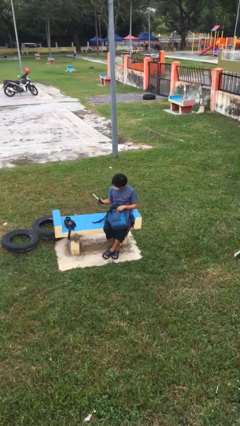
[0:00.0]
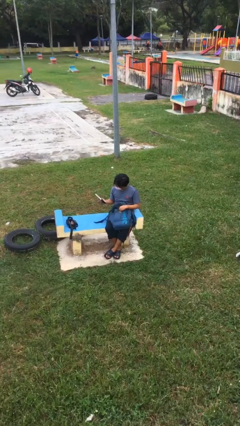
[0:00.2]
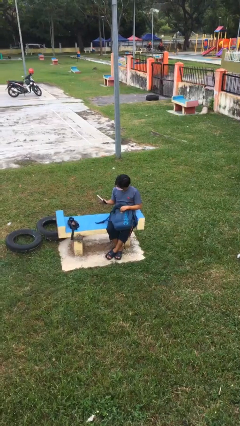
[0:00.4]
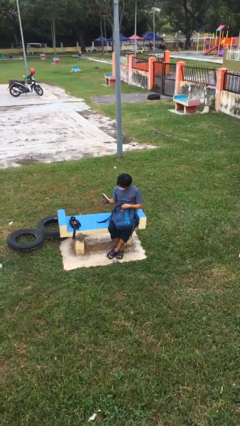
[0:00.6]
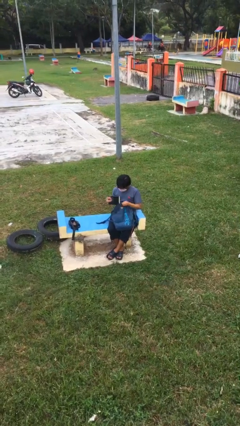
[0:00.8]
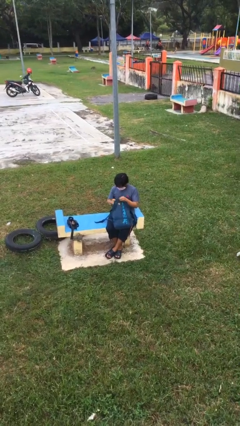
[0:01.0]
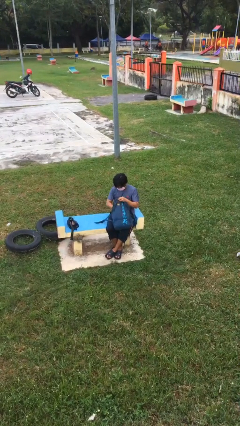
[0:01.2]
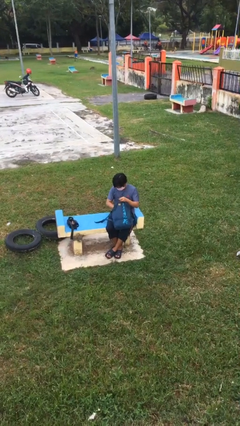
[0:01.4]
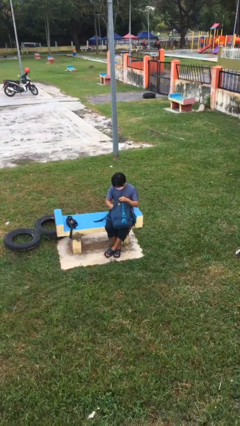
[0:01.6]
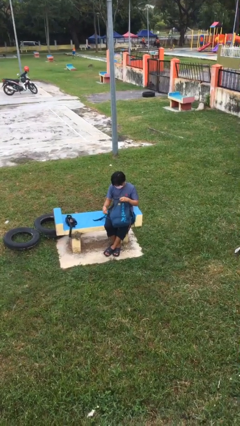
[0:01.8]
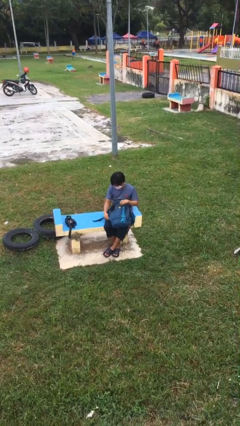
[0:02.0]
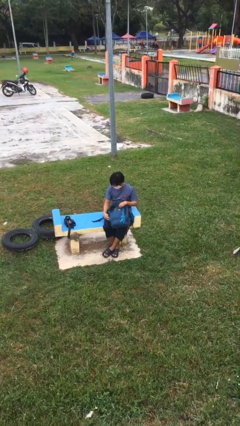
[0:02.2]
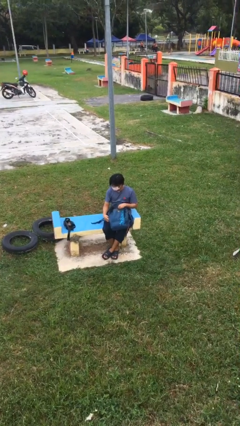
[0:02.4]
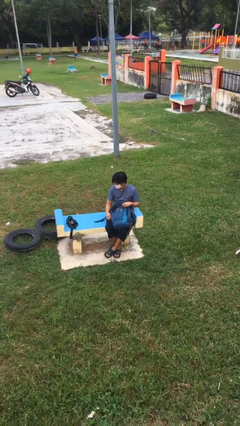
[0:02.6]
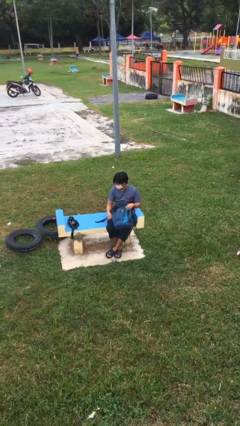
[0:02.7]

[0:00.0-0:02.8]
person puts object into backpack

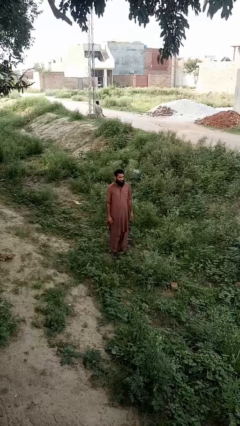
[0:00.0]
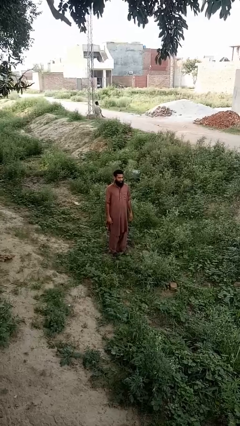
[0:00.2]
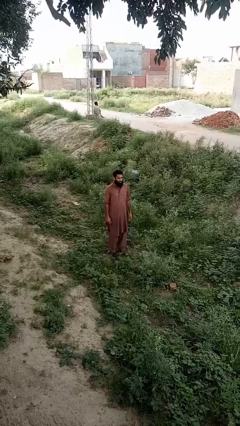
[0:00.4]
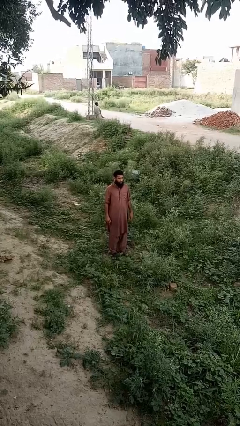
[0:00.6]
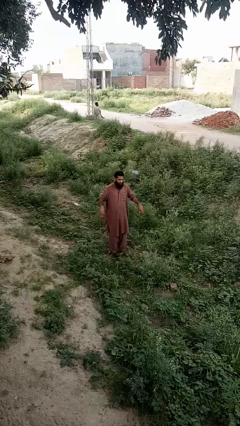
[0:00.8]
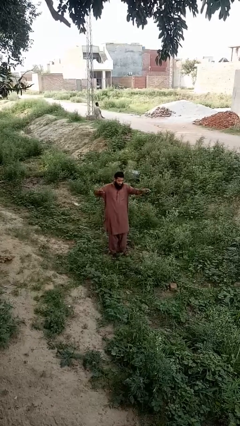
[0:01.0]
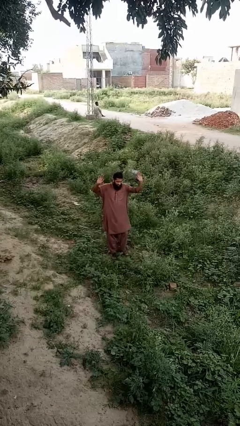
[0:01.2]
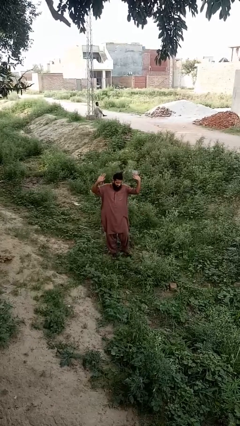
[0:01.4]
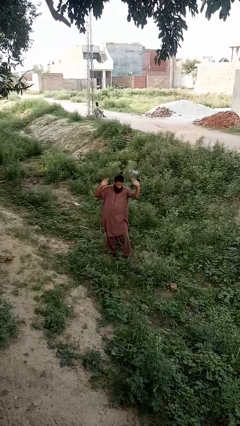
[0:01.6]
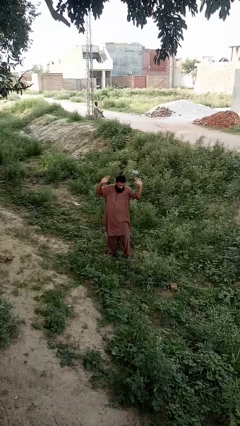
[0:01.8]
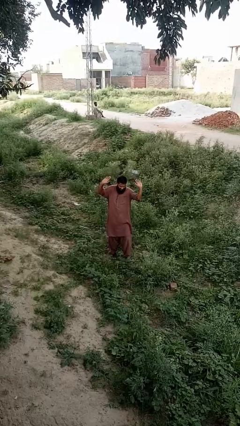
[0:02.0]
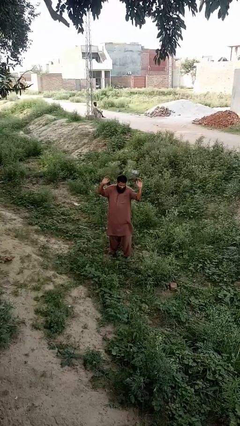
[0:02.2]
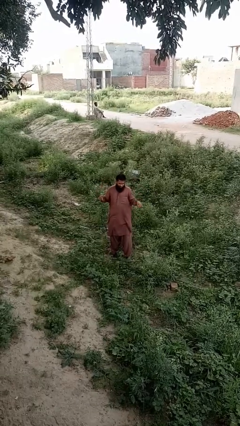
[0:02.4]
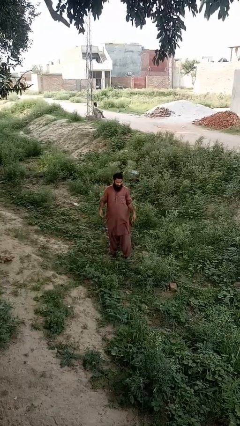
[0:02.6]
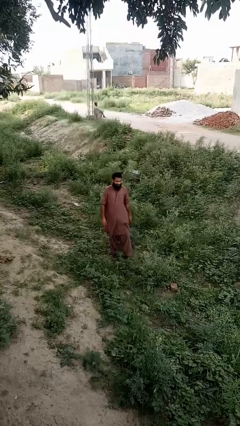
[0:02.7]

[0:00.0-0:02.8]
person dances in place

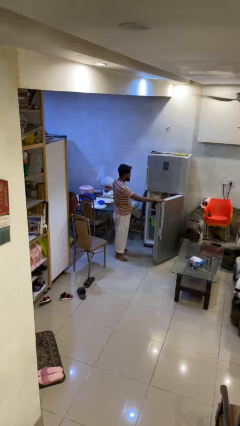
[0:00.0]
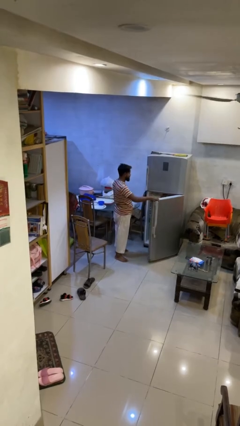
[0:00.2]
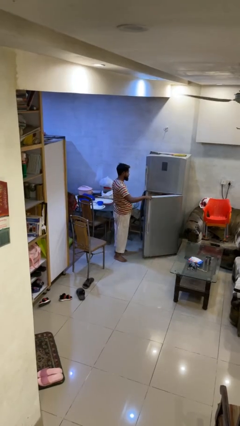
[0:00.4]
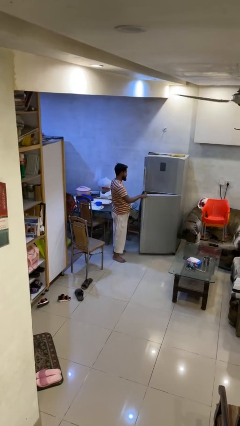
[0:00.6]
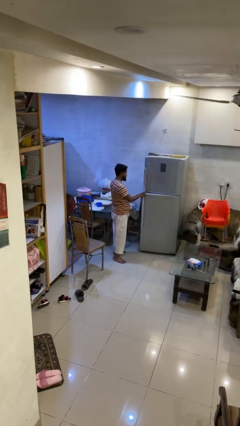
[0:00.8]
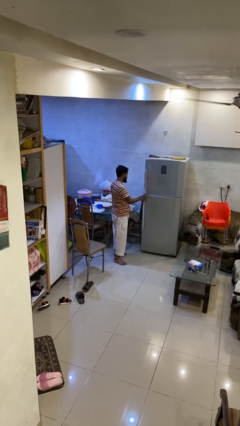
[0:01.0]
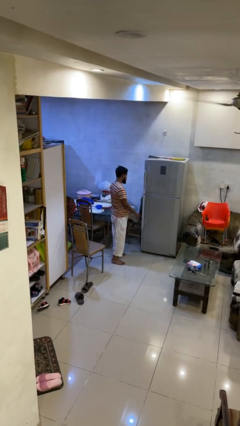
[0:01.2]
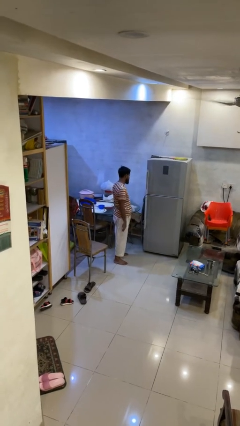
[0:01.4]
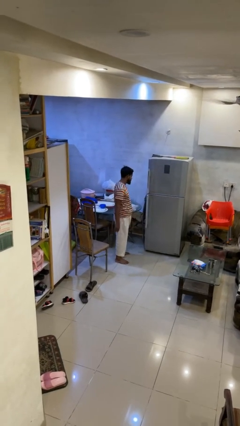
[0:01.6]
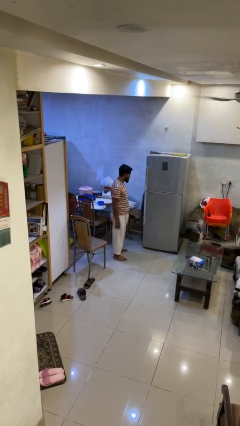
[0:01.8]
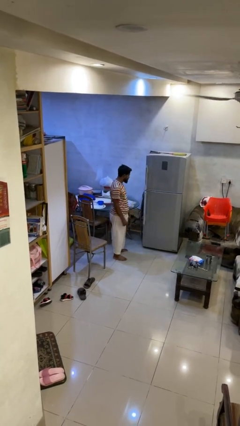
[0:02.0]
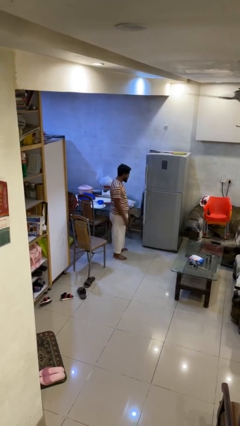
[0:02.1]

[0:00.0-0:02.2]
person closes refrigerator

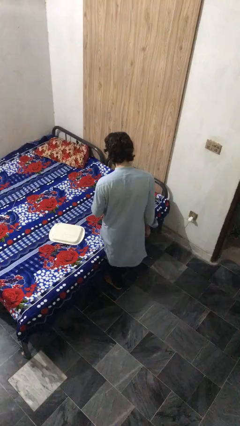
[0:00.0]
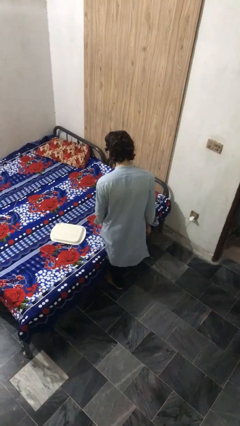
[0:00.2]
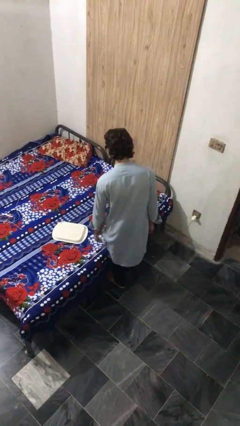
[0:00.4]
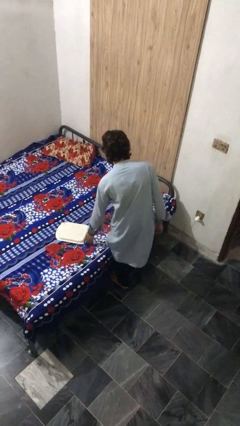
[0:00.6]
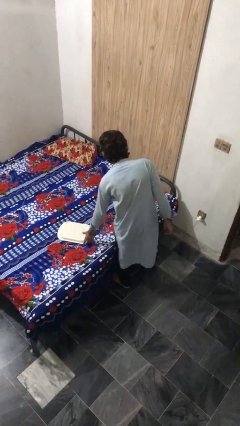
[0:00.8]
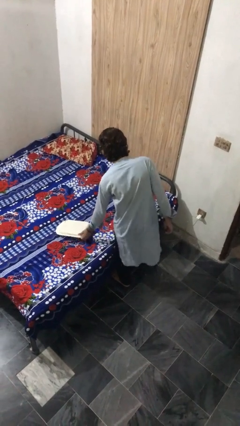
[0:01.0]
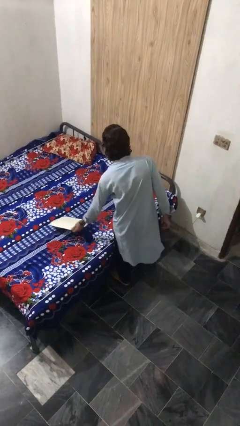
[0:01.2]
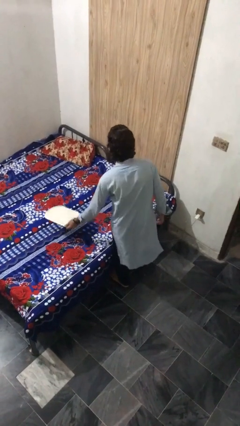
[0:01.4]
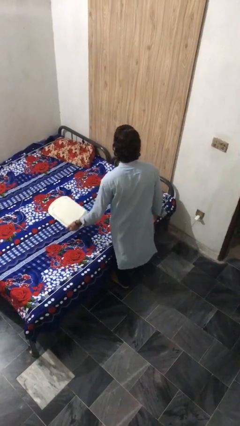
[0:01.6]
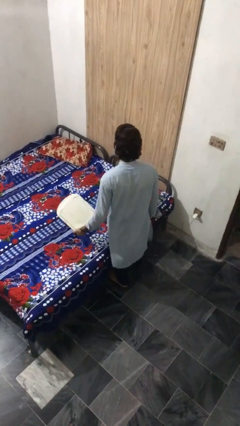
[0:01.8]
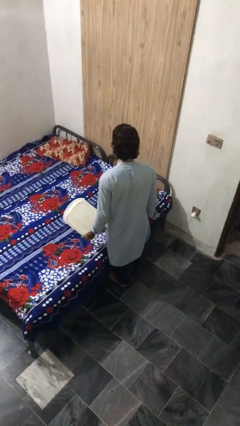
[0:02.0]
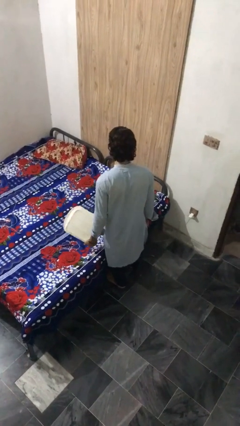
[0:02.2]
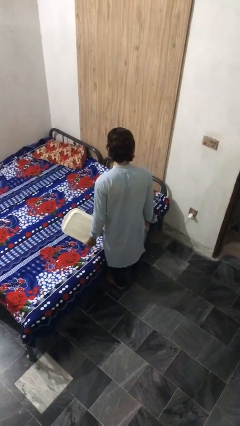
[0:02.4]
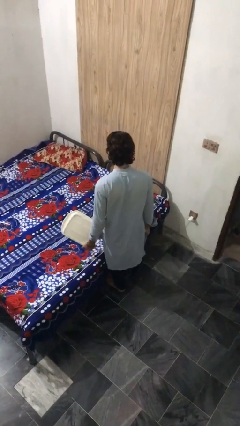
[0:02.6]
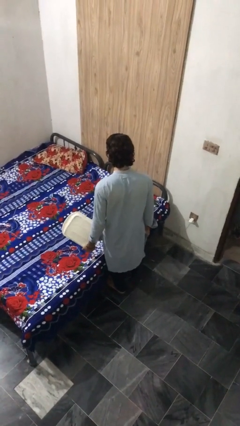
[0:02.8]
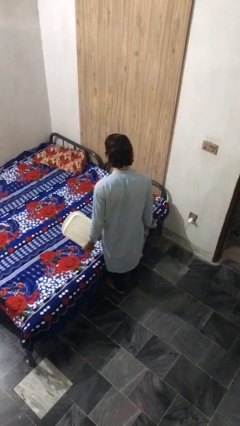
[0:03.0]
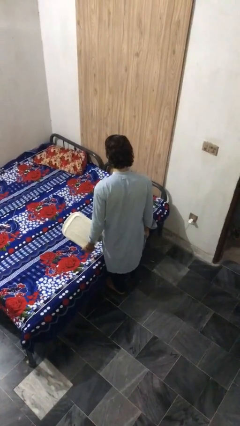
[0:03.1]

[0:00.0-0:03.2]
person picks up object from bed

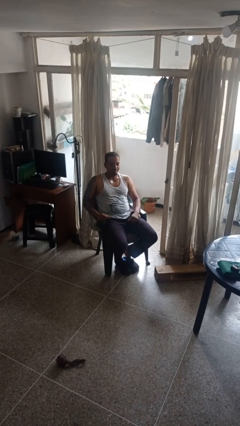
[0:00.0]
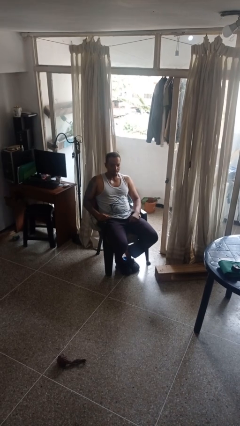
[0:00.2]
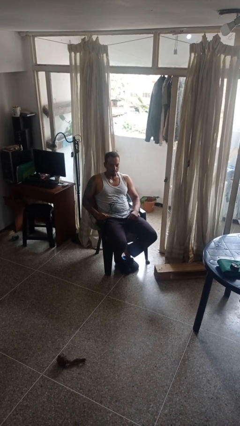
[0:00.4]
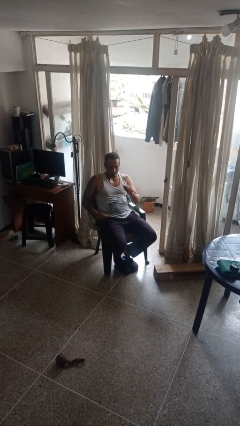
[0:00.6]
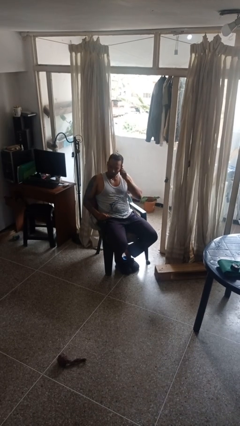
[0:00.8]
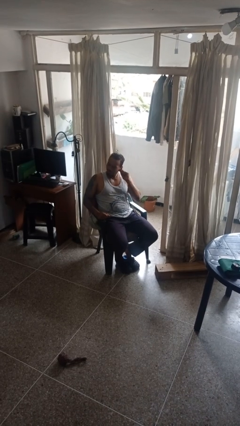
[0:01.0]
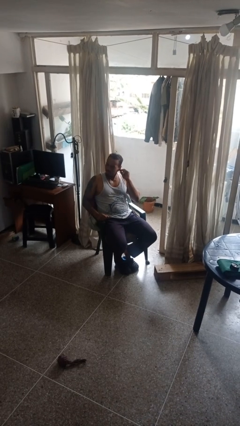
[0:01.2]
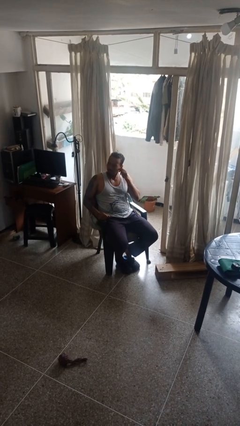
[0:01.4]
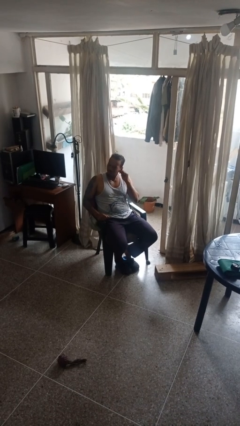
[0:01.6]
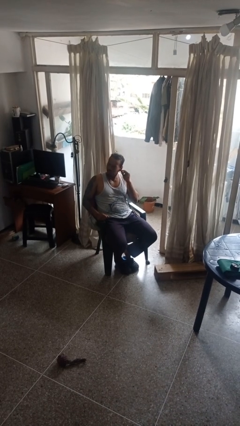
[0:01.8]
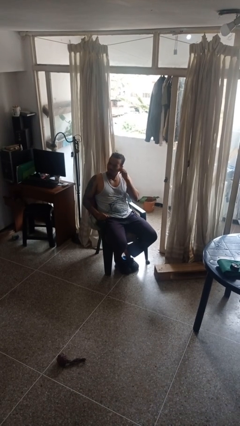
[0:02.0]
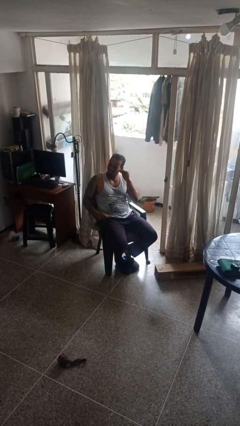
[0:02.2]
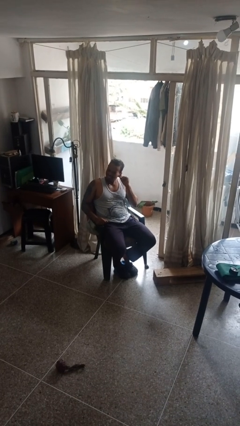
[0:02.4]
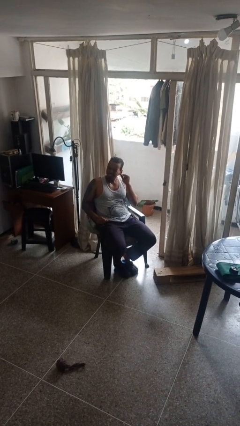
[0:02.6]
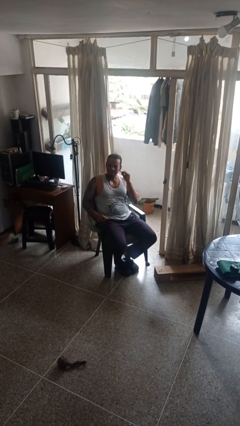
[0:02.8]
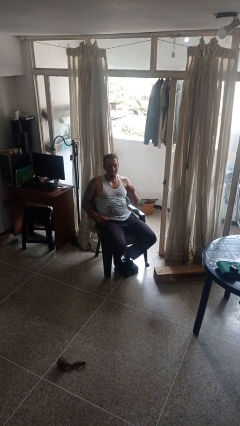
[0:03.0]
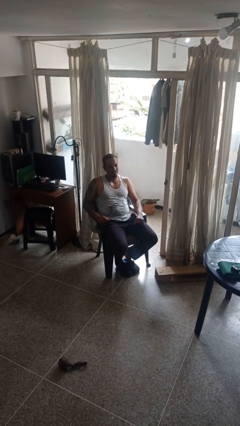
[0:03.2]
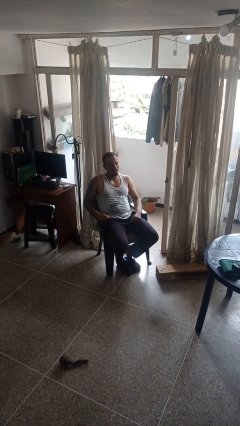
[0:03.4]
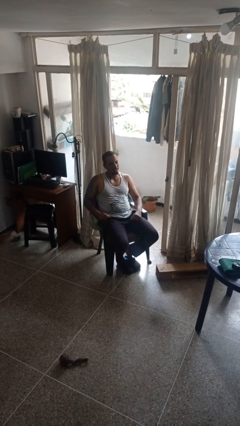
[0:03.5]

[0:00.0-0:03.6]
person touches earlobe

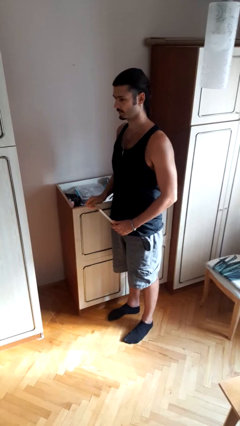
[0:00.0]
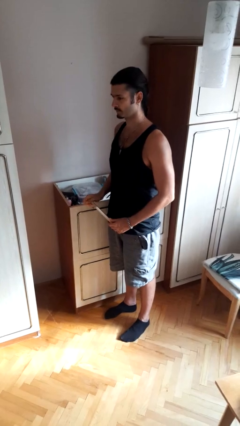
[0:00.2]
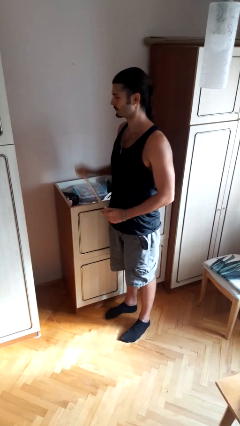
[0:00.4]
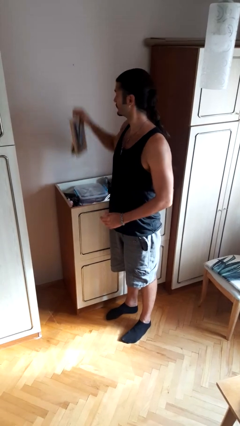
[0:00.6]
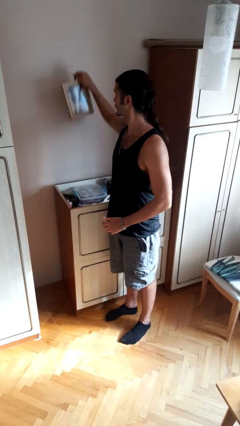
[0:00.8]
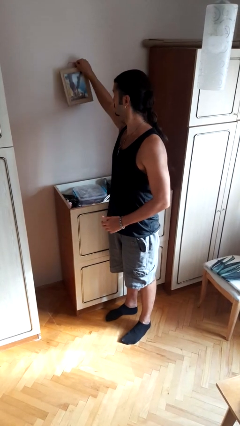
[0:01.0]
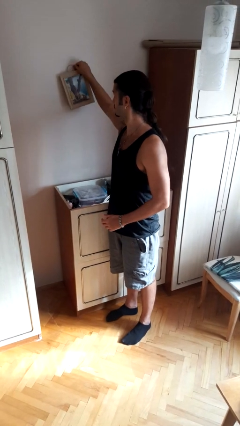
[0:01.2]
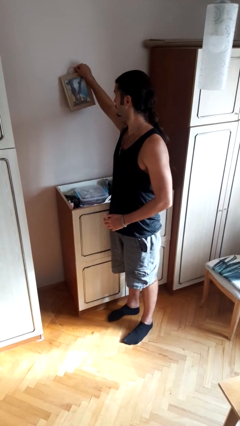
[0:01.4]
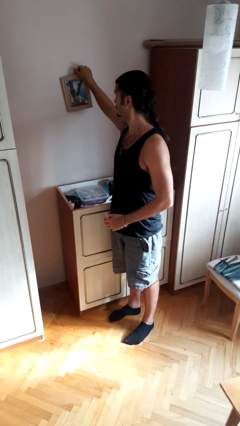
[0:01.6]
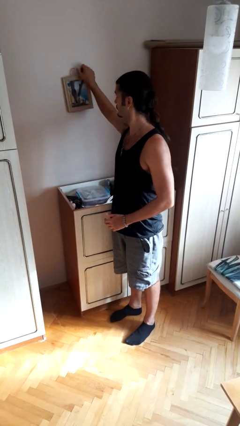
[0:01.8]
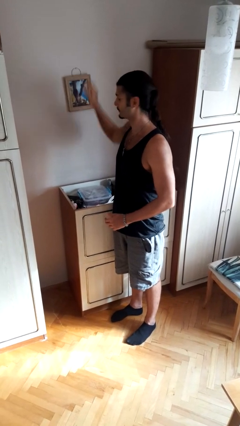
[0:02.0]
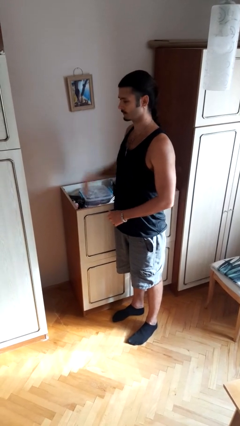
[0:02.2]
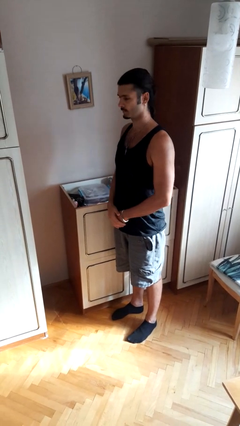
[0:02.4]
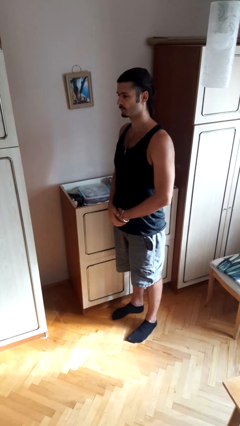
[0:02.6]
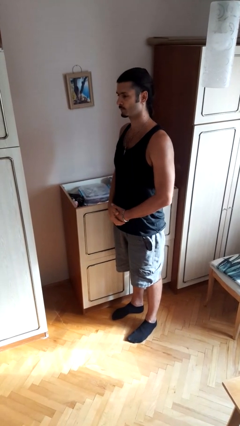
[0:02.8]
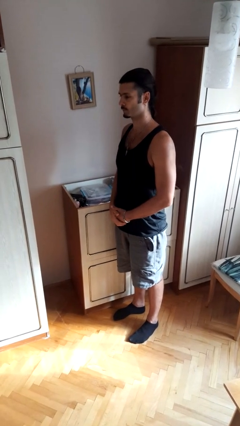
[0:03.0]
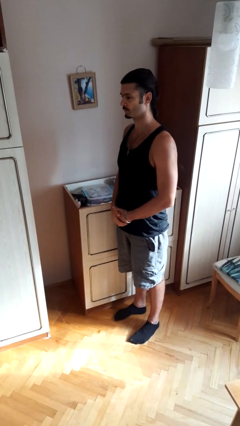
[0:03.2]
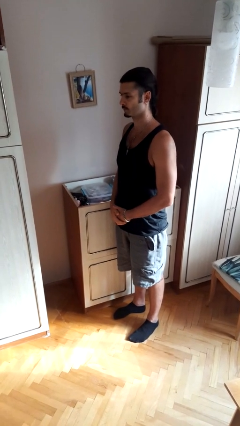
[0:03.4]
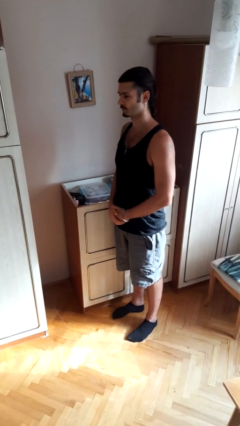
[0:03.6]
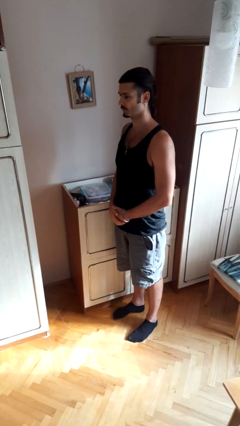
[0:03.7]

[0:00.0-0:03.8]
person puts up picture frame
